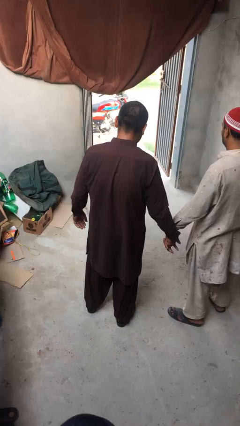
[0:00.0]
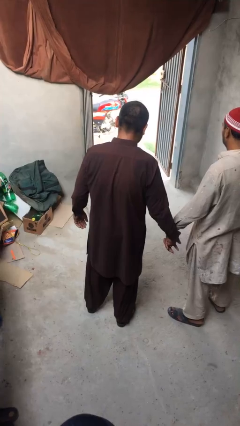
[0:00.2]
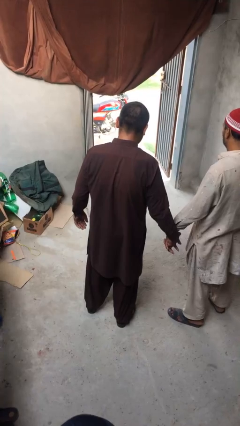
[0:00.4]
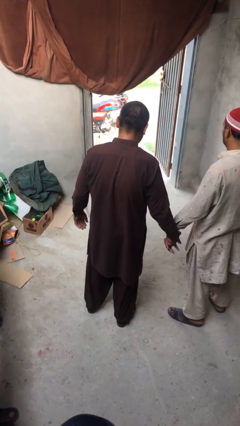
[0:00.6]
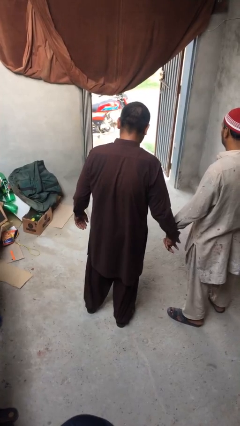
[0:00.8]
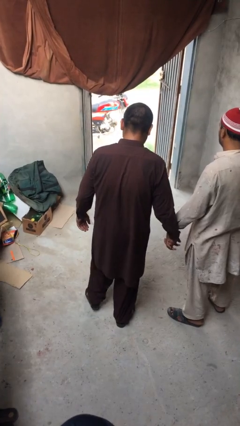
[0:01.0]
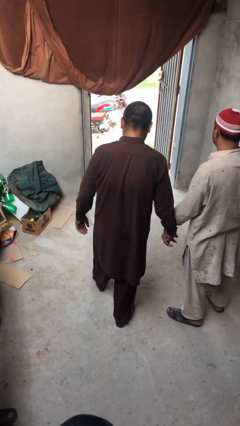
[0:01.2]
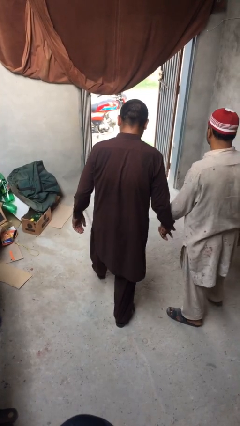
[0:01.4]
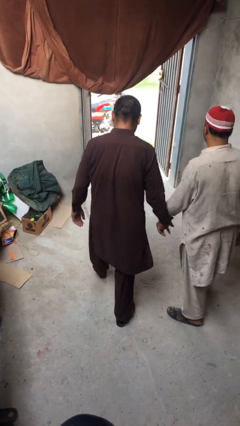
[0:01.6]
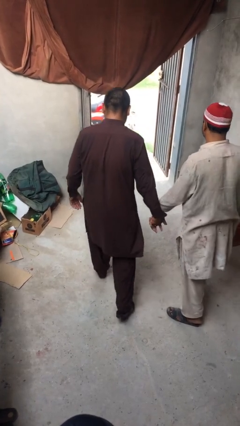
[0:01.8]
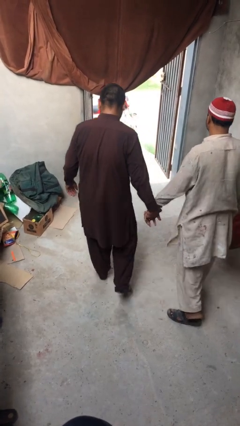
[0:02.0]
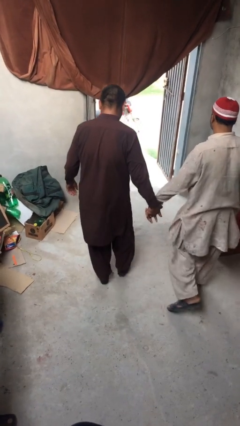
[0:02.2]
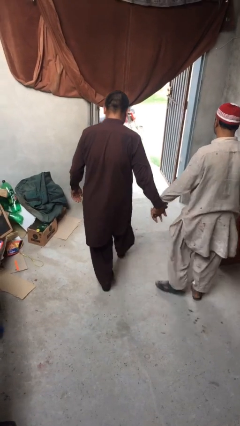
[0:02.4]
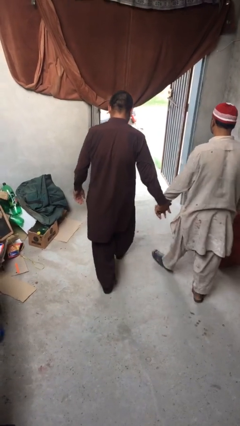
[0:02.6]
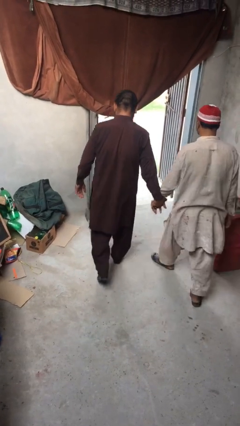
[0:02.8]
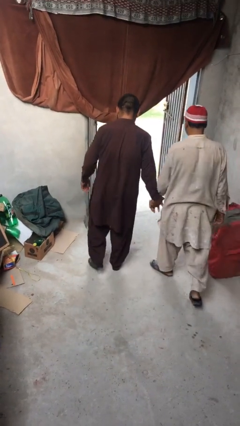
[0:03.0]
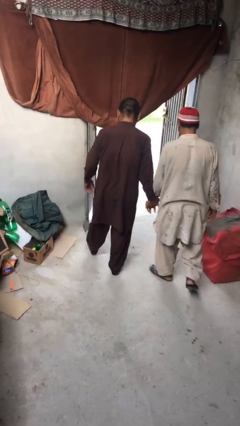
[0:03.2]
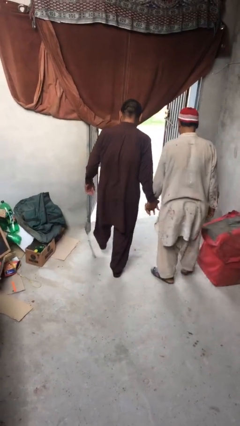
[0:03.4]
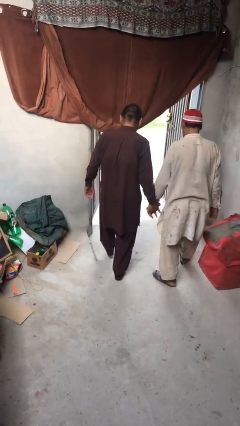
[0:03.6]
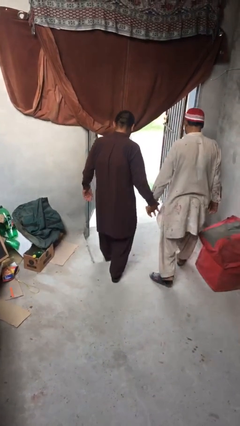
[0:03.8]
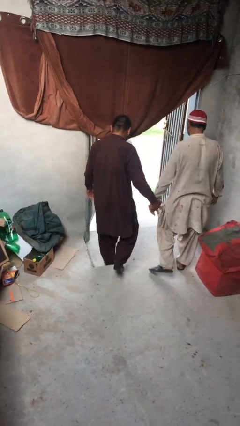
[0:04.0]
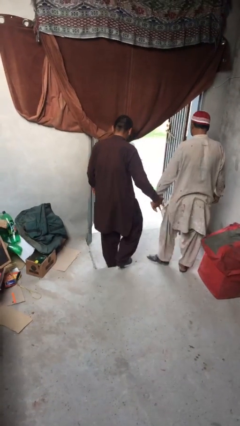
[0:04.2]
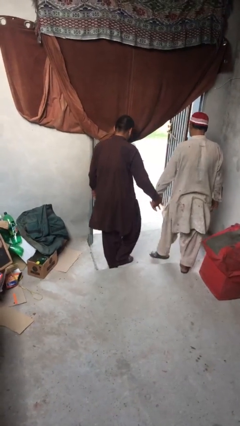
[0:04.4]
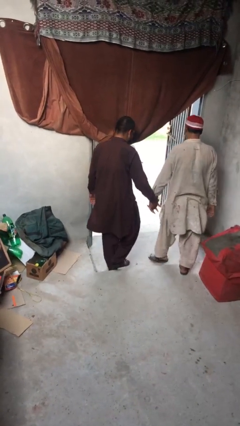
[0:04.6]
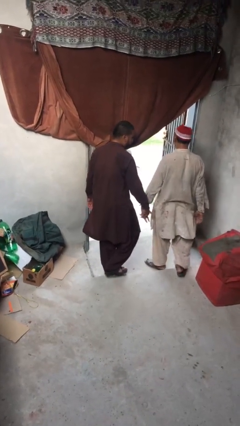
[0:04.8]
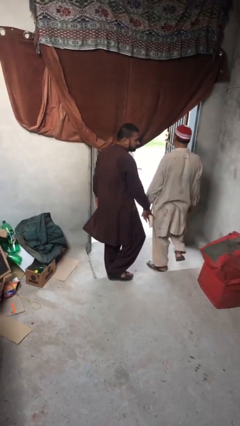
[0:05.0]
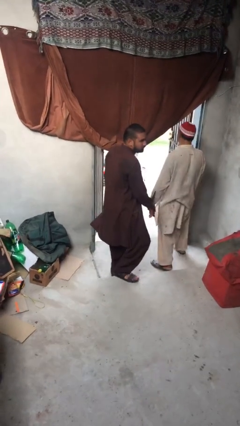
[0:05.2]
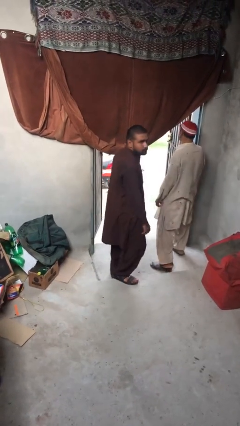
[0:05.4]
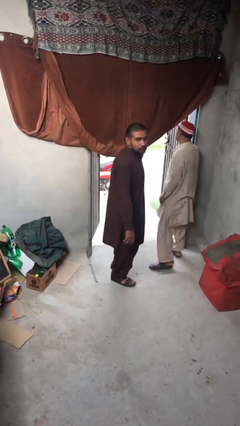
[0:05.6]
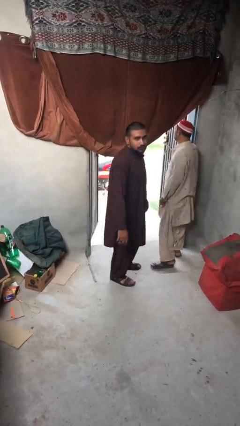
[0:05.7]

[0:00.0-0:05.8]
person holds hand

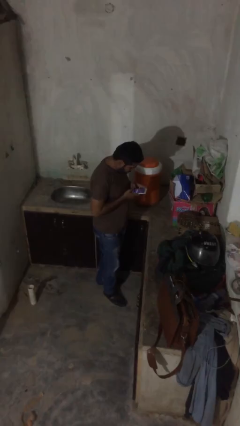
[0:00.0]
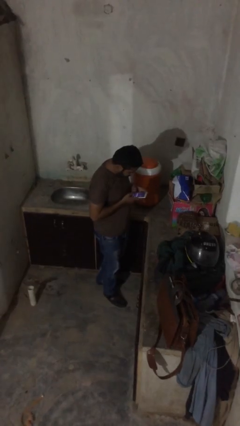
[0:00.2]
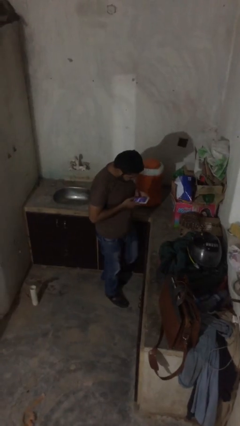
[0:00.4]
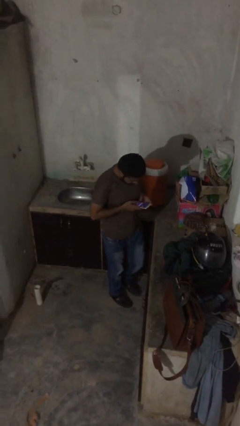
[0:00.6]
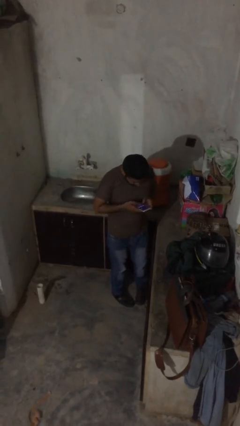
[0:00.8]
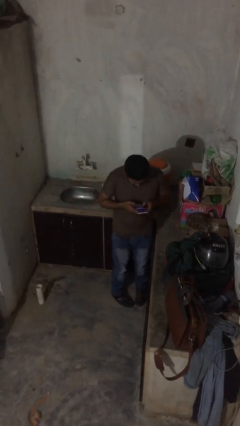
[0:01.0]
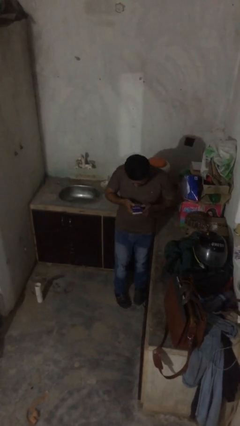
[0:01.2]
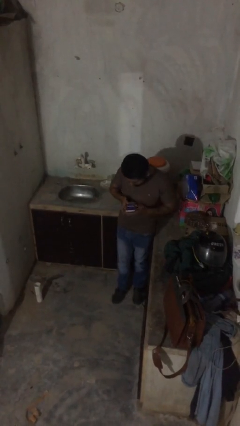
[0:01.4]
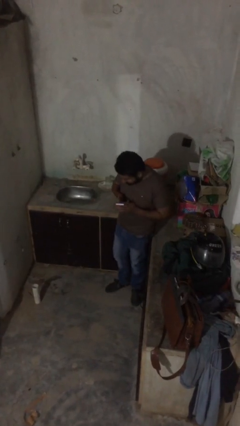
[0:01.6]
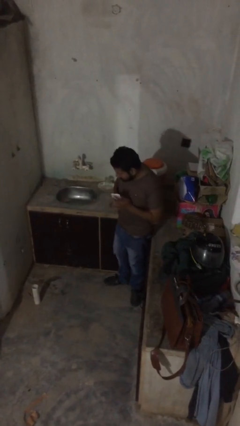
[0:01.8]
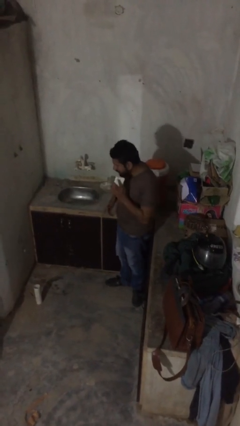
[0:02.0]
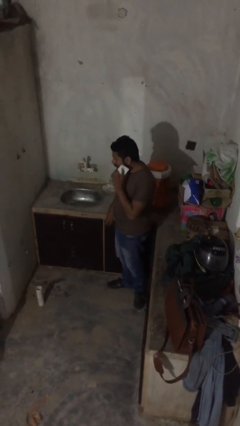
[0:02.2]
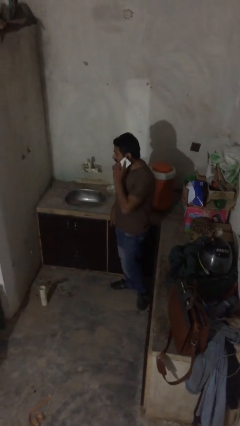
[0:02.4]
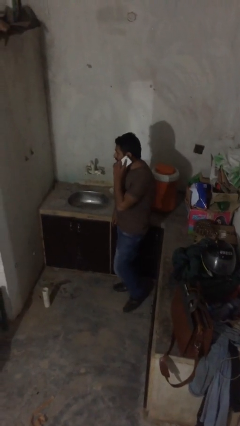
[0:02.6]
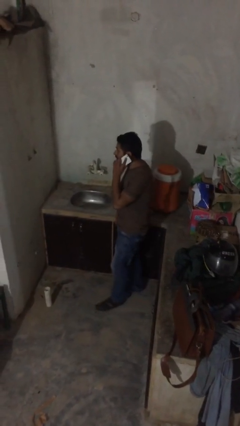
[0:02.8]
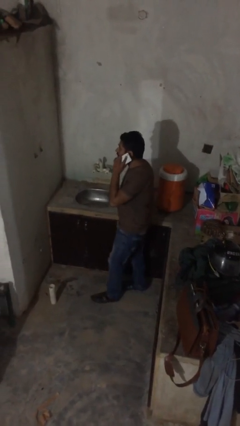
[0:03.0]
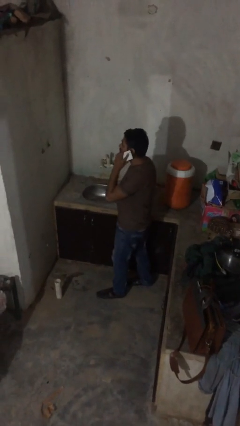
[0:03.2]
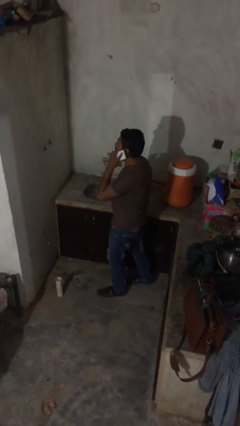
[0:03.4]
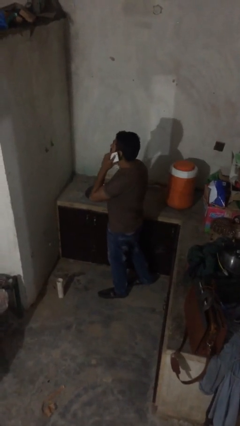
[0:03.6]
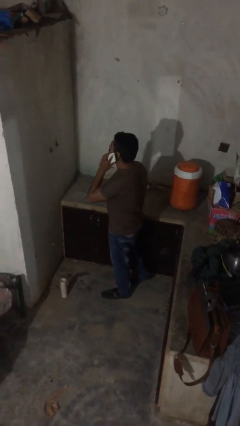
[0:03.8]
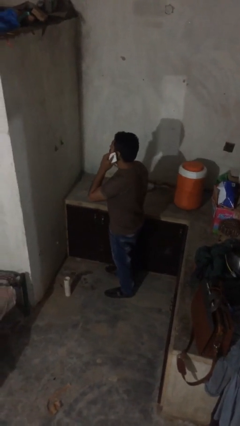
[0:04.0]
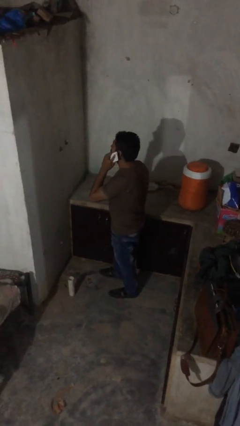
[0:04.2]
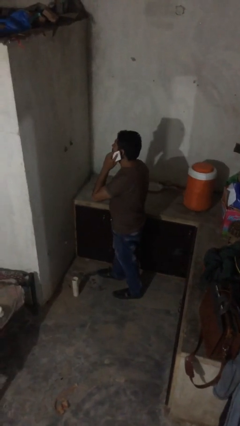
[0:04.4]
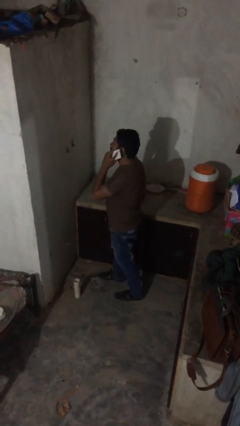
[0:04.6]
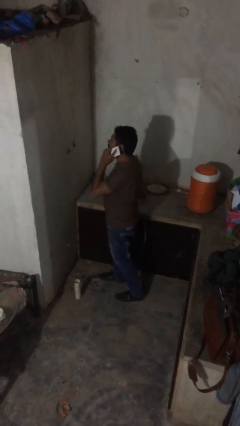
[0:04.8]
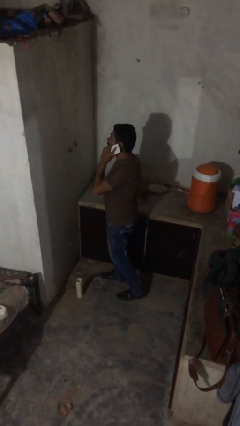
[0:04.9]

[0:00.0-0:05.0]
person talks on phone

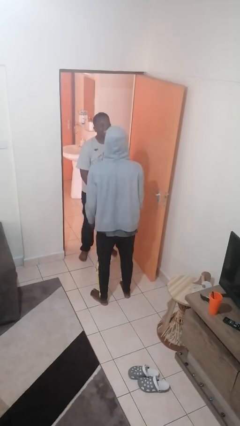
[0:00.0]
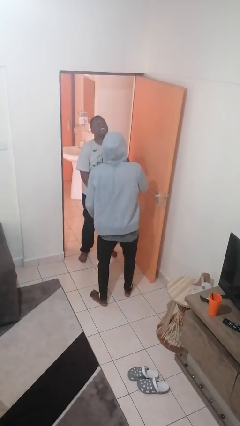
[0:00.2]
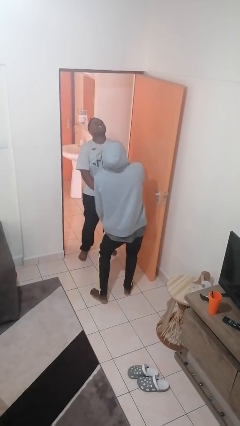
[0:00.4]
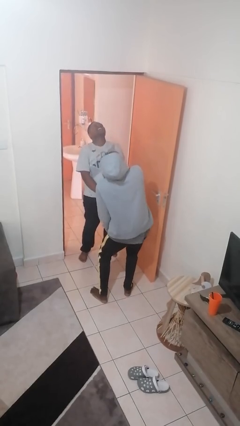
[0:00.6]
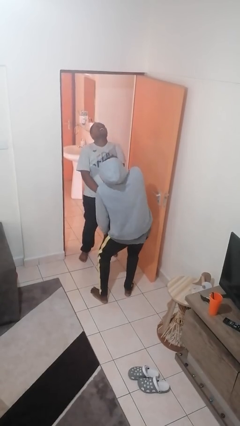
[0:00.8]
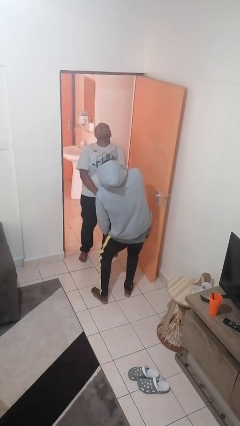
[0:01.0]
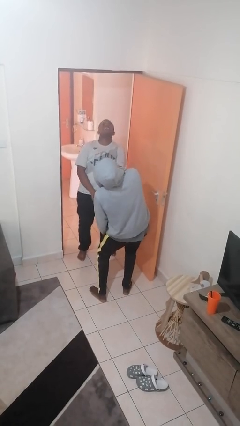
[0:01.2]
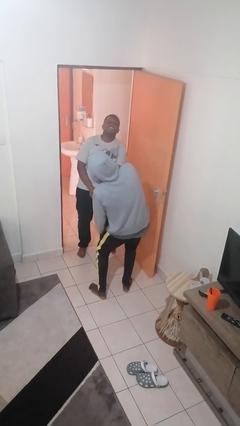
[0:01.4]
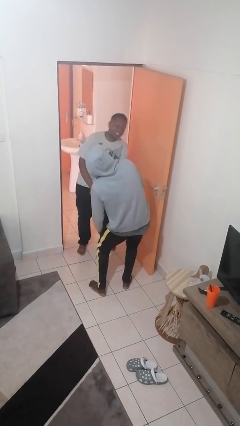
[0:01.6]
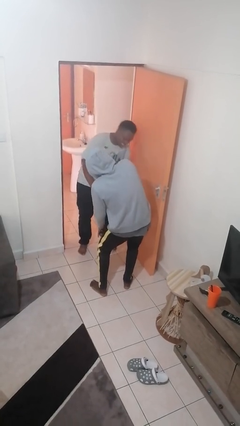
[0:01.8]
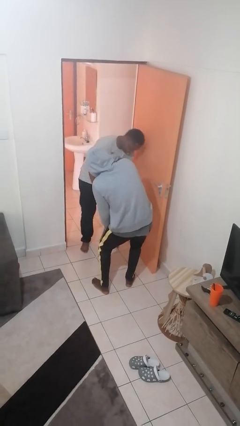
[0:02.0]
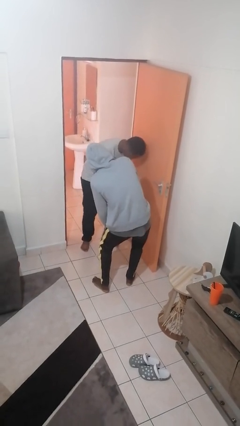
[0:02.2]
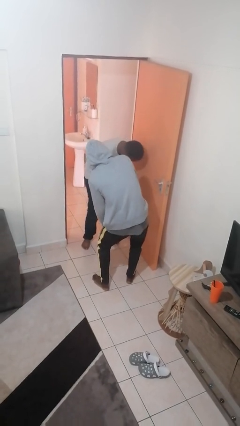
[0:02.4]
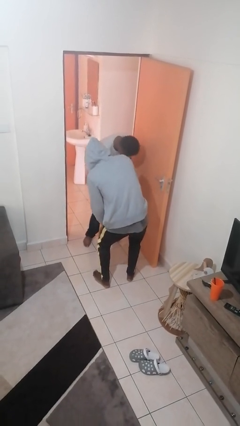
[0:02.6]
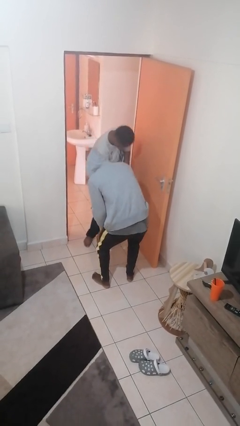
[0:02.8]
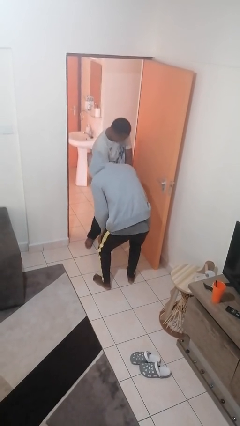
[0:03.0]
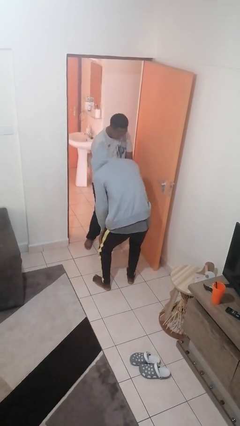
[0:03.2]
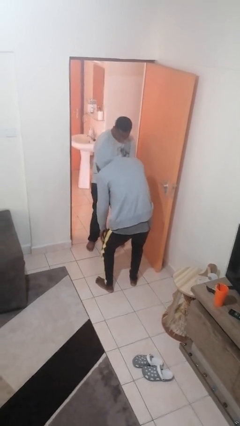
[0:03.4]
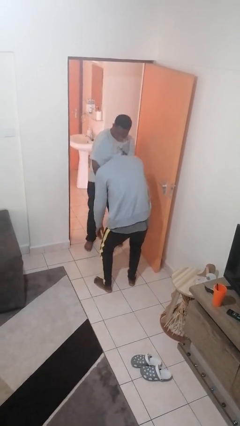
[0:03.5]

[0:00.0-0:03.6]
person laughs with person

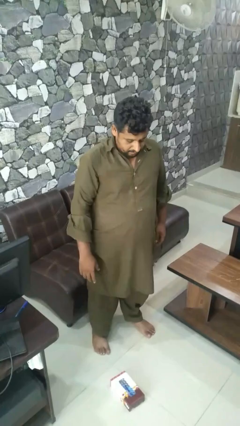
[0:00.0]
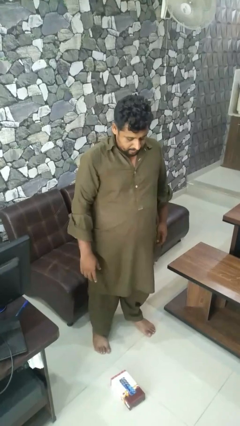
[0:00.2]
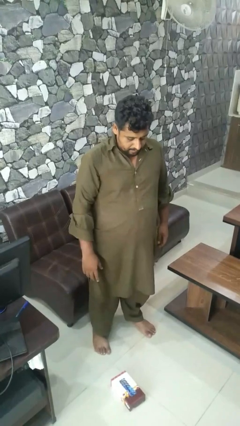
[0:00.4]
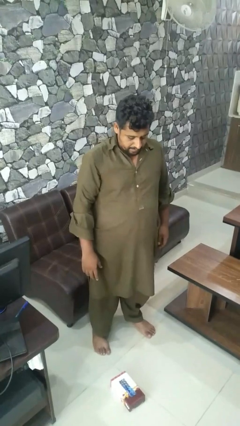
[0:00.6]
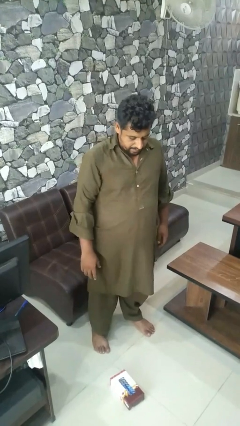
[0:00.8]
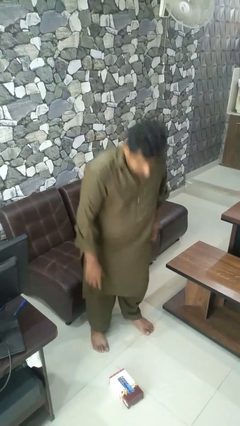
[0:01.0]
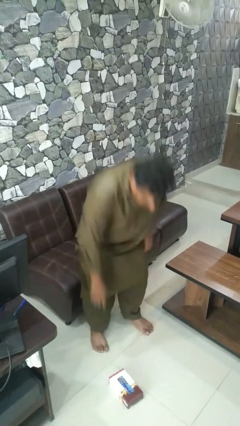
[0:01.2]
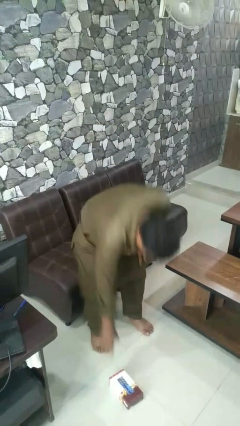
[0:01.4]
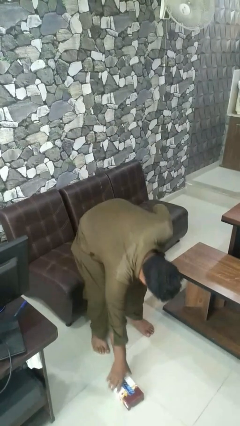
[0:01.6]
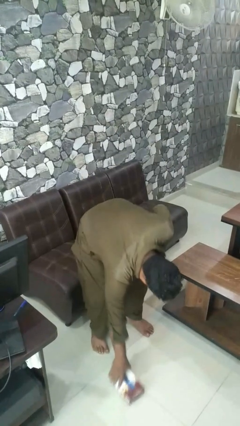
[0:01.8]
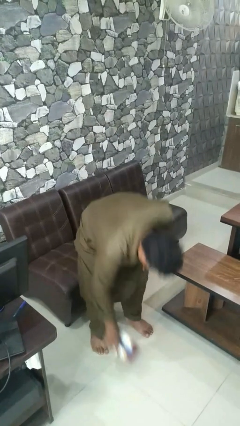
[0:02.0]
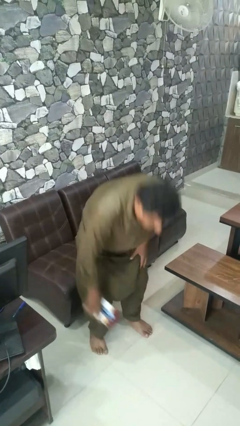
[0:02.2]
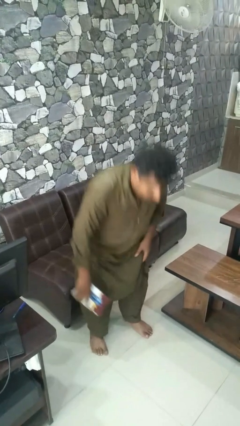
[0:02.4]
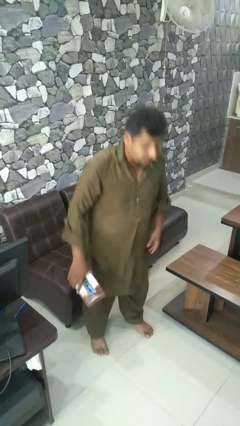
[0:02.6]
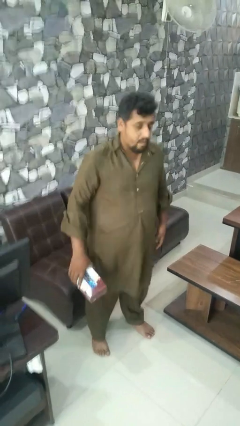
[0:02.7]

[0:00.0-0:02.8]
person picks up object from floor

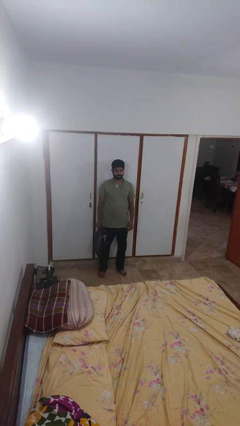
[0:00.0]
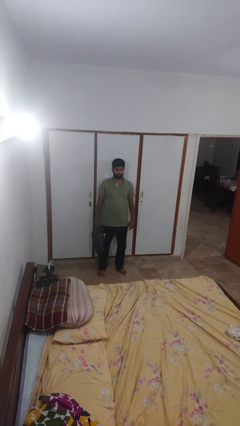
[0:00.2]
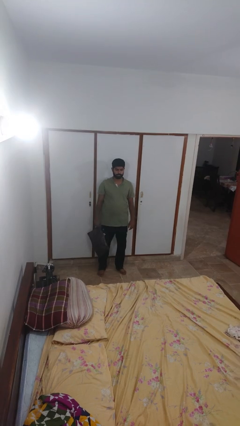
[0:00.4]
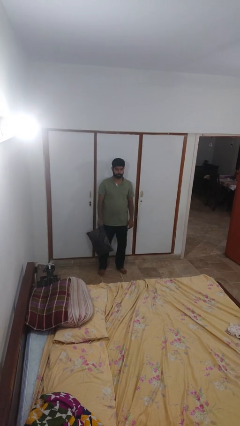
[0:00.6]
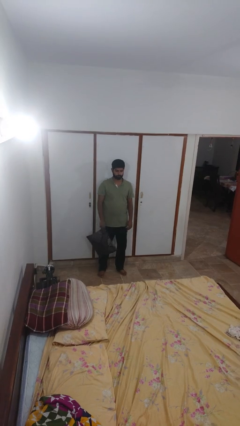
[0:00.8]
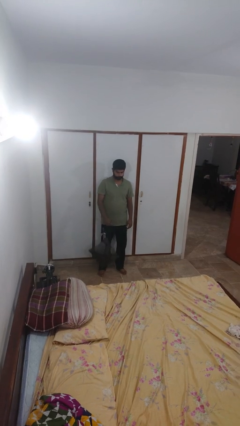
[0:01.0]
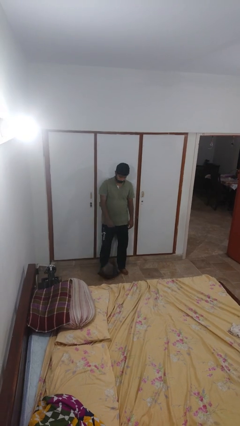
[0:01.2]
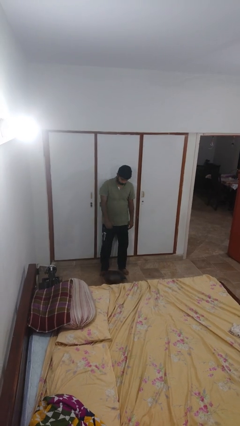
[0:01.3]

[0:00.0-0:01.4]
person drops object
